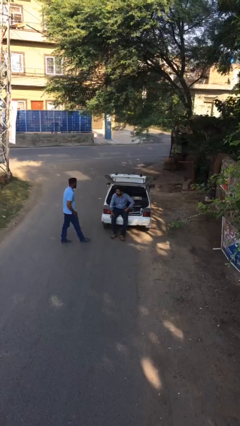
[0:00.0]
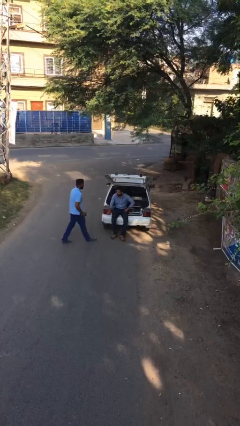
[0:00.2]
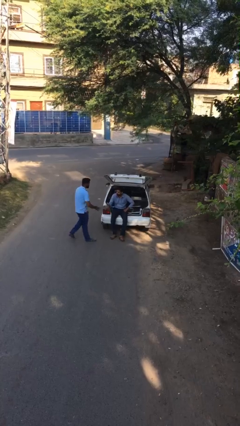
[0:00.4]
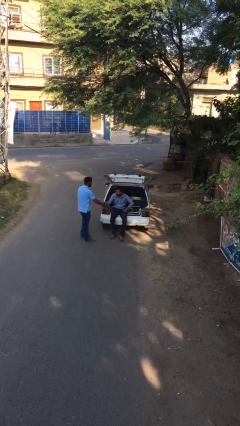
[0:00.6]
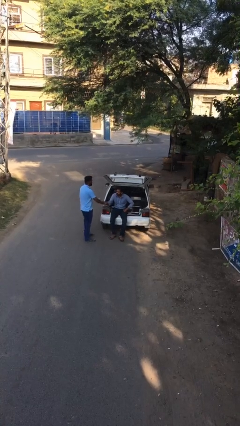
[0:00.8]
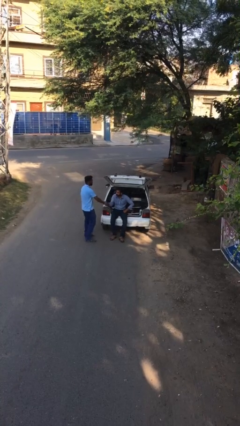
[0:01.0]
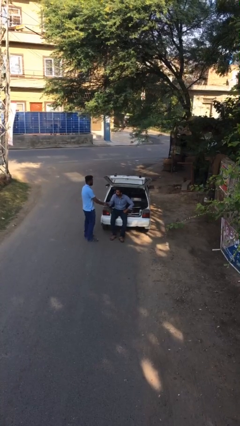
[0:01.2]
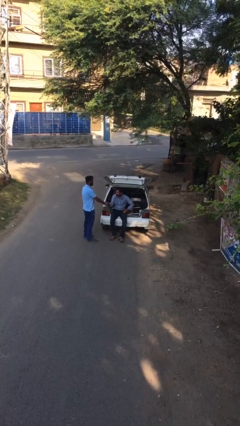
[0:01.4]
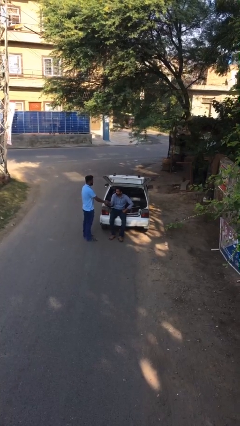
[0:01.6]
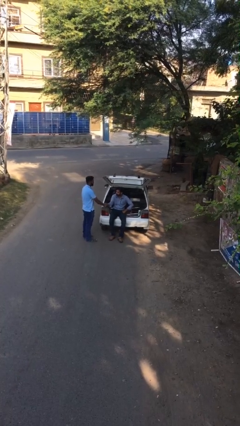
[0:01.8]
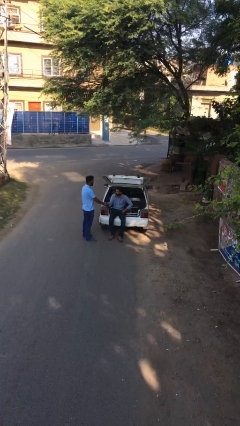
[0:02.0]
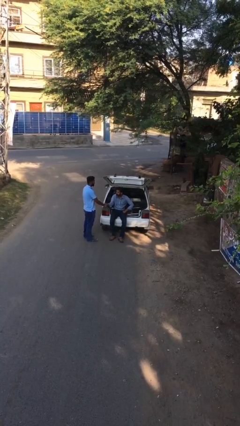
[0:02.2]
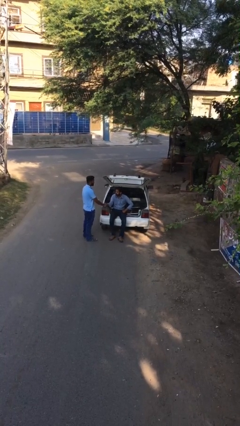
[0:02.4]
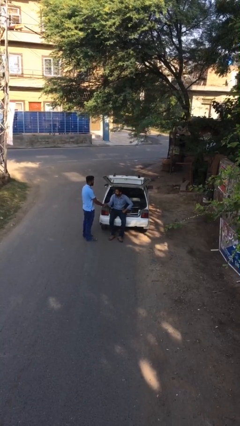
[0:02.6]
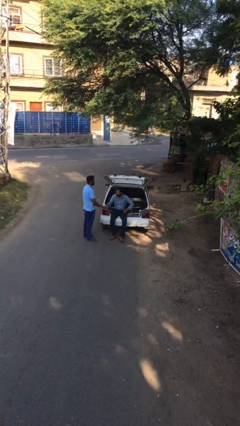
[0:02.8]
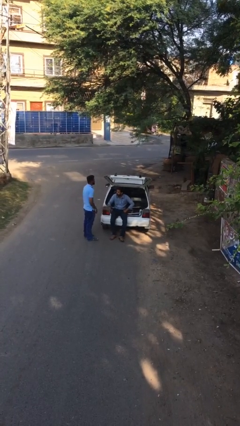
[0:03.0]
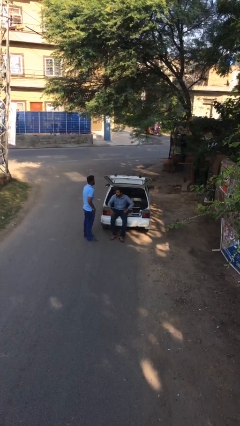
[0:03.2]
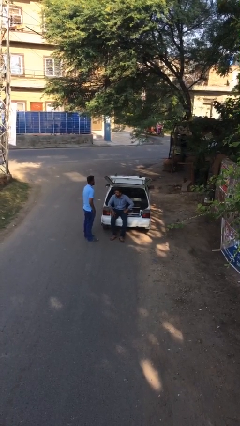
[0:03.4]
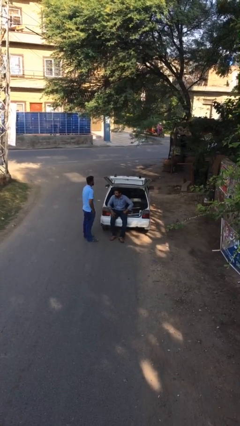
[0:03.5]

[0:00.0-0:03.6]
person shakes hand

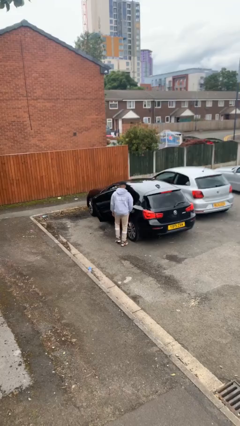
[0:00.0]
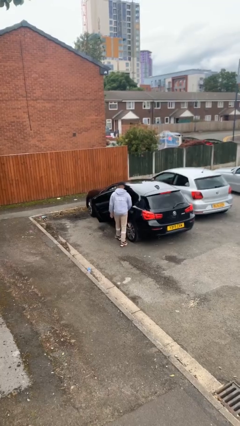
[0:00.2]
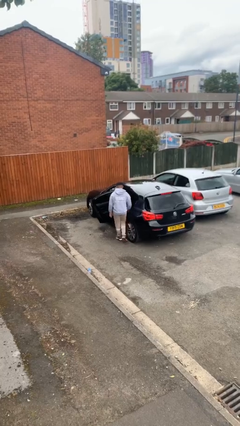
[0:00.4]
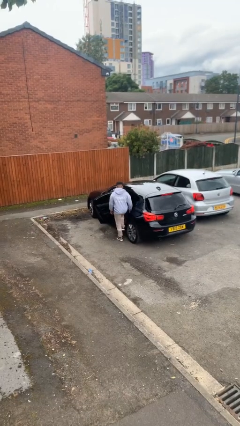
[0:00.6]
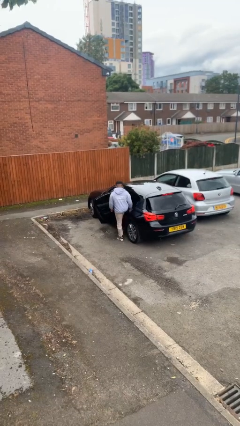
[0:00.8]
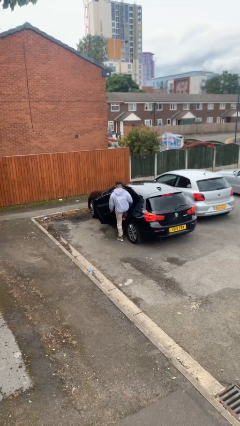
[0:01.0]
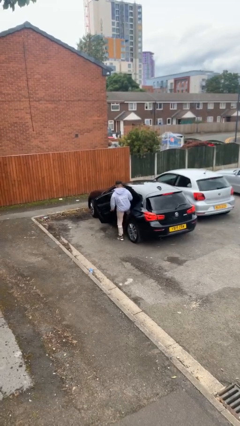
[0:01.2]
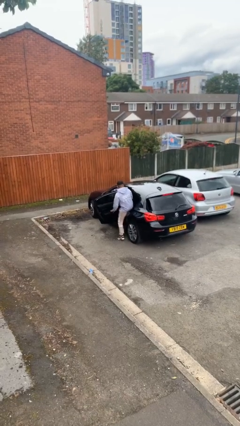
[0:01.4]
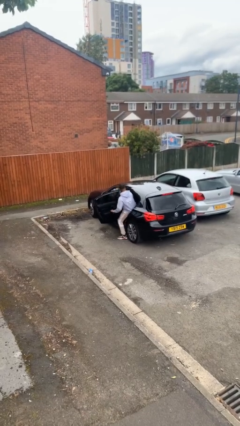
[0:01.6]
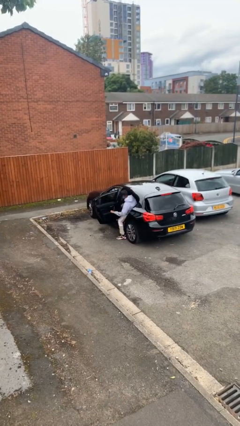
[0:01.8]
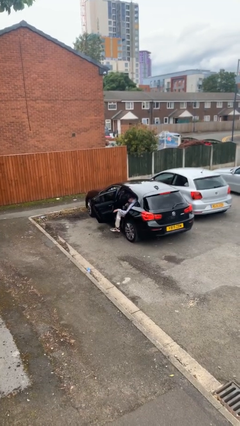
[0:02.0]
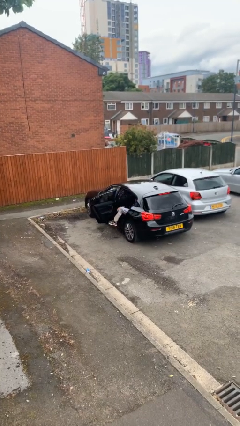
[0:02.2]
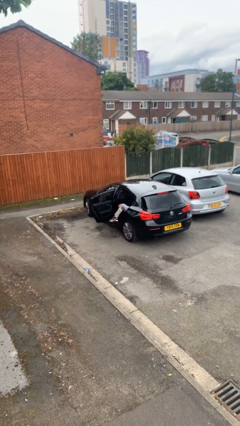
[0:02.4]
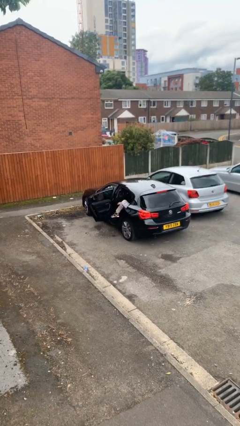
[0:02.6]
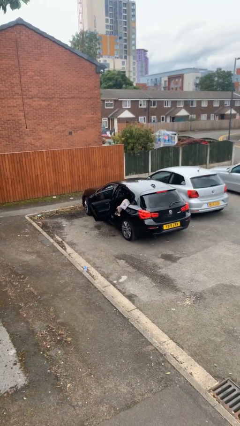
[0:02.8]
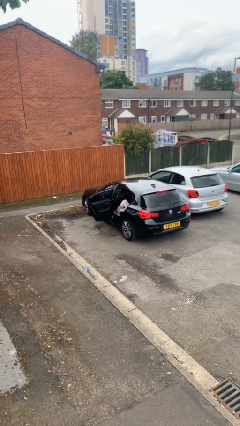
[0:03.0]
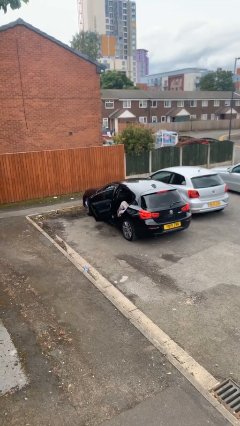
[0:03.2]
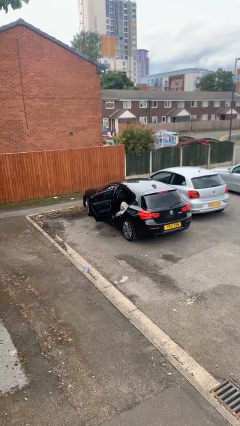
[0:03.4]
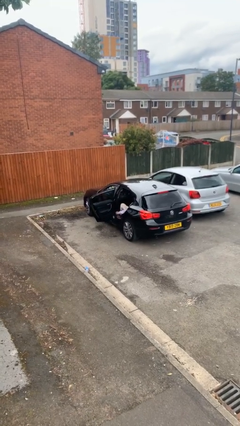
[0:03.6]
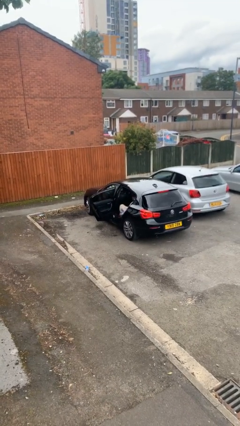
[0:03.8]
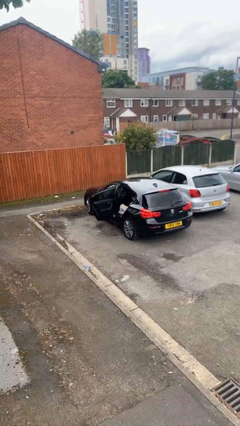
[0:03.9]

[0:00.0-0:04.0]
person enters car

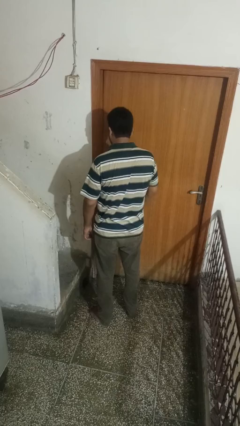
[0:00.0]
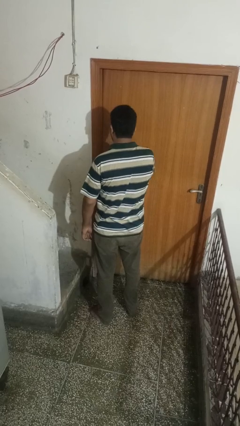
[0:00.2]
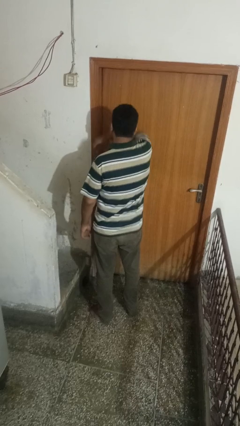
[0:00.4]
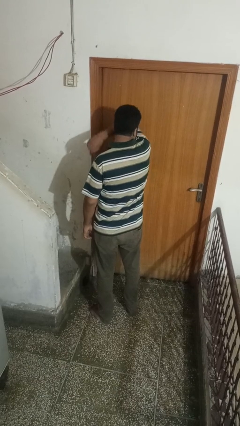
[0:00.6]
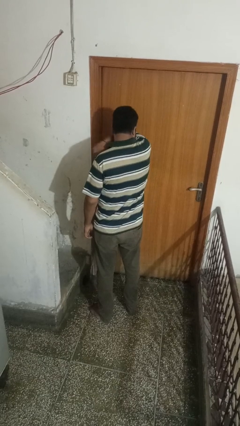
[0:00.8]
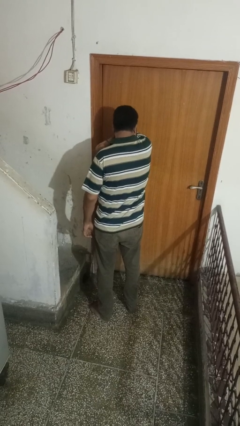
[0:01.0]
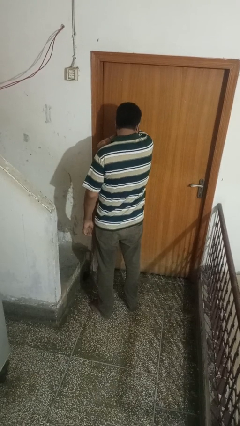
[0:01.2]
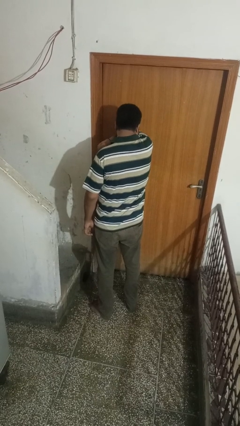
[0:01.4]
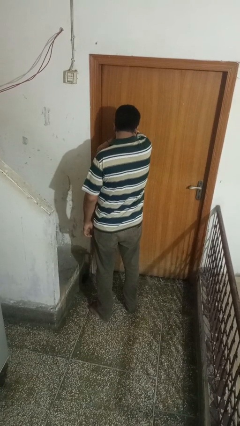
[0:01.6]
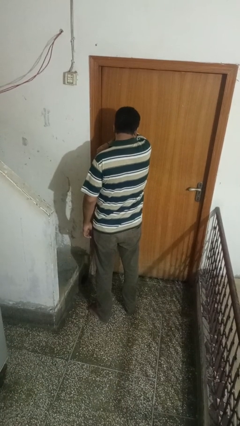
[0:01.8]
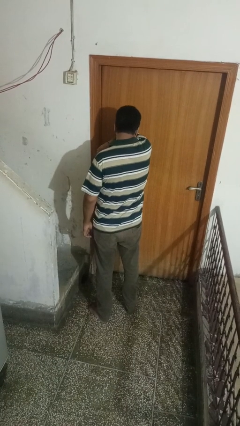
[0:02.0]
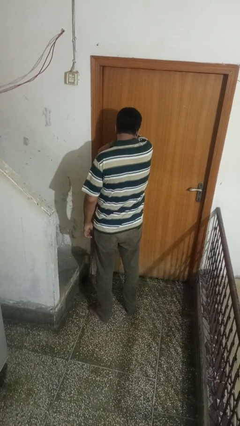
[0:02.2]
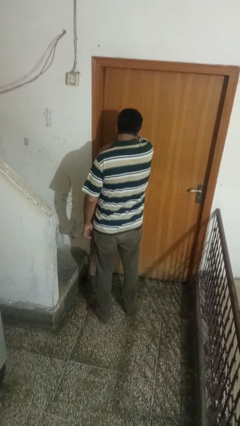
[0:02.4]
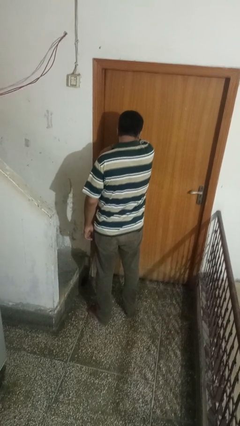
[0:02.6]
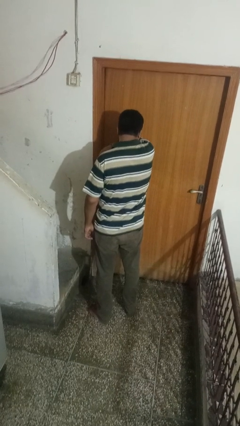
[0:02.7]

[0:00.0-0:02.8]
person sneezes into arm

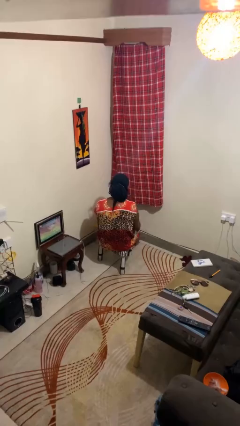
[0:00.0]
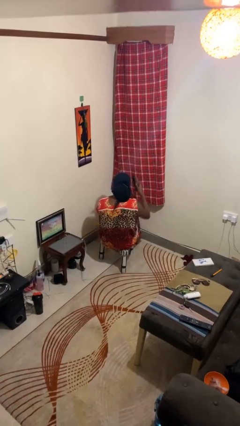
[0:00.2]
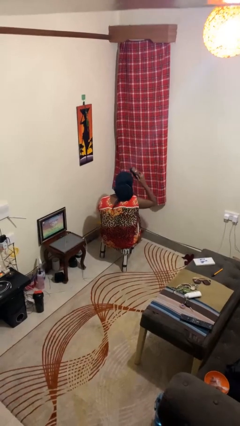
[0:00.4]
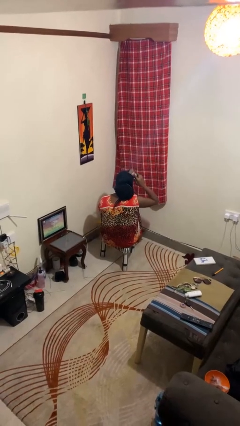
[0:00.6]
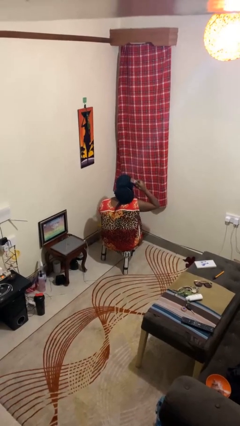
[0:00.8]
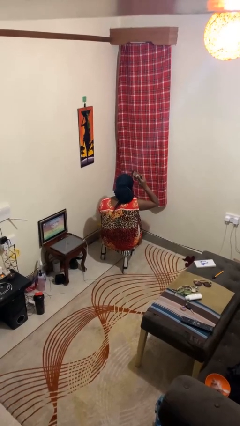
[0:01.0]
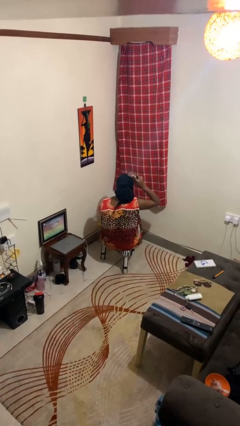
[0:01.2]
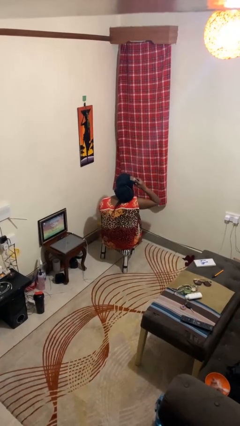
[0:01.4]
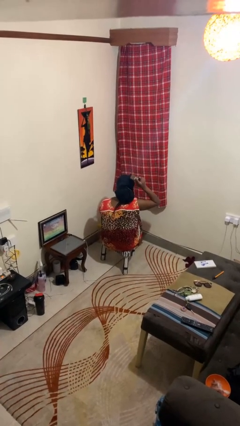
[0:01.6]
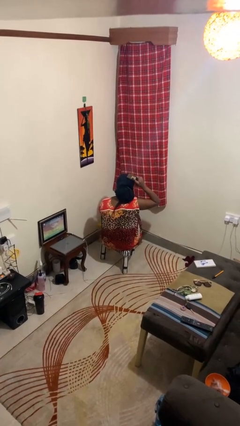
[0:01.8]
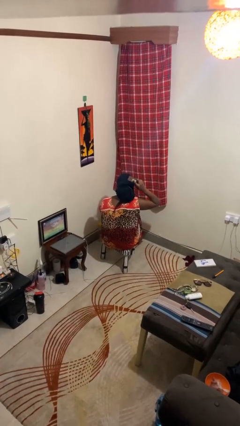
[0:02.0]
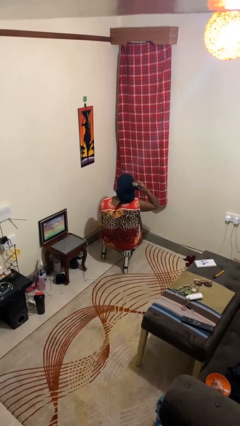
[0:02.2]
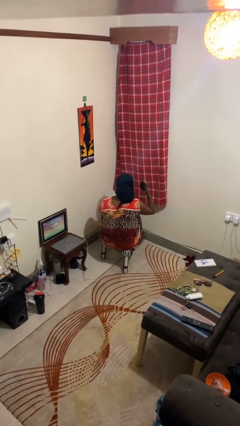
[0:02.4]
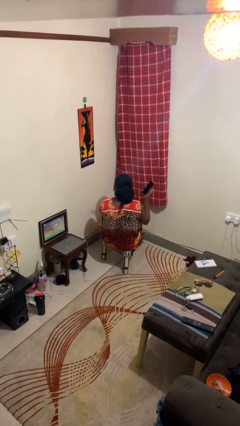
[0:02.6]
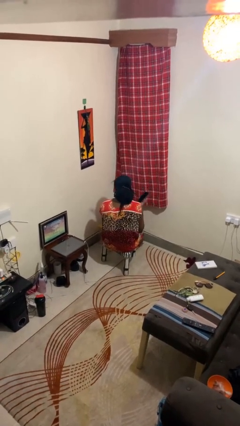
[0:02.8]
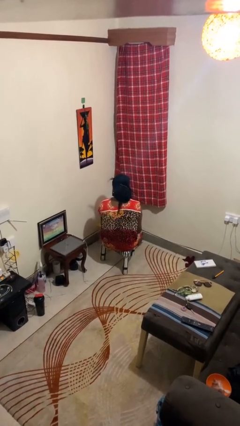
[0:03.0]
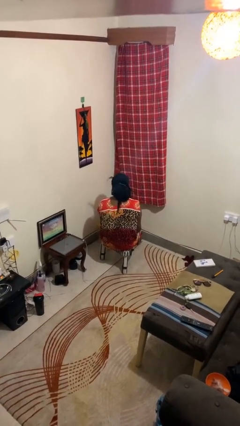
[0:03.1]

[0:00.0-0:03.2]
person brushes hair

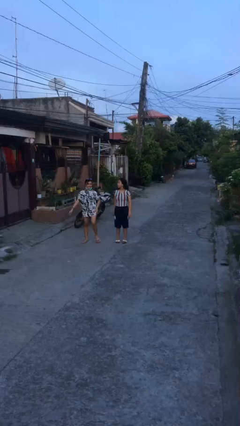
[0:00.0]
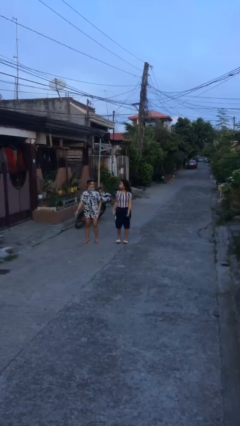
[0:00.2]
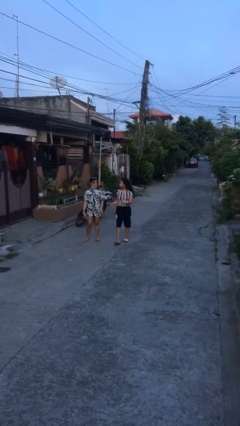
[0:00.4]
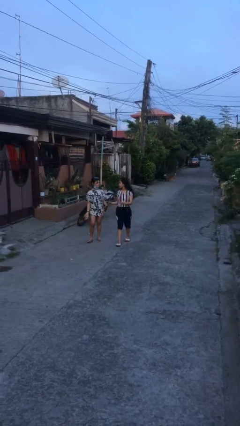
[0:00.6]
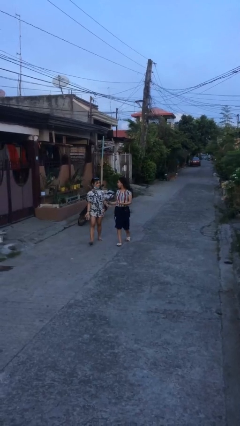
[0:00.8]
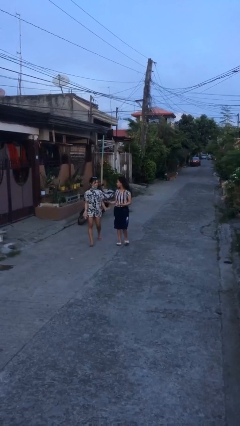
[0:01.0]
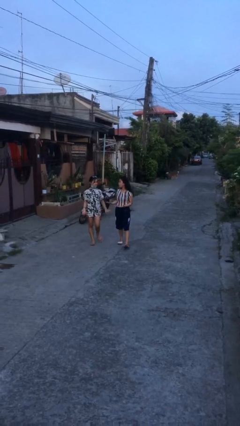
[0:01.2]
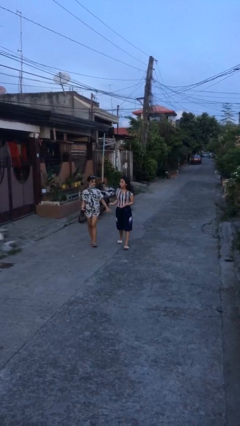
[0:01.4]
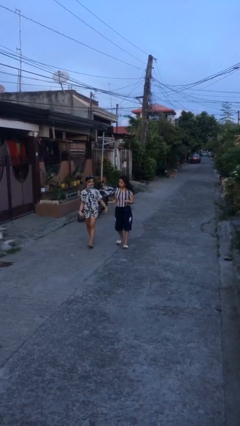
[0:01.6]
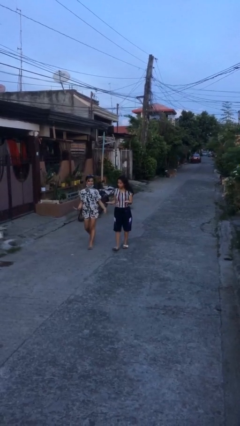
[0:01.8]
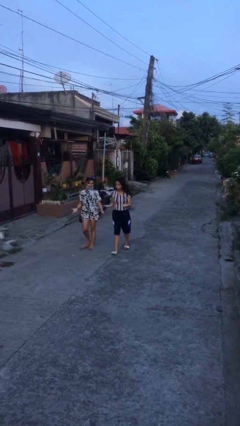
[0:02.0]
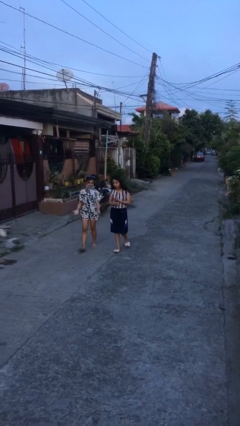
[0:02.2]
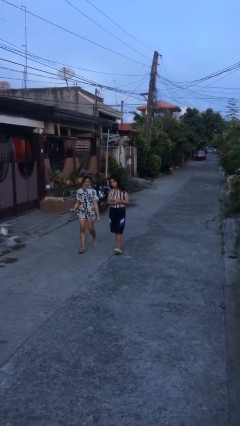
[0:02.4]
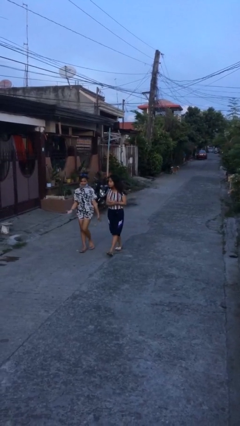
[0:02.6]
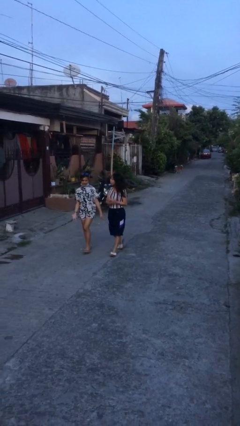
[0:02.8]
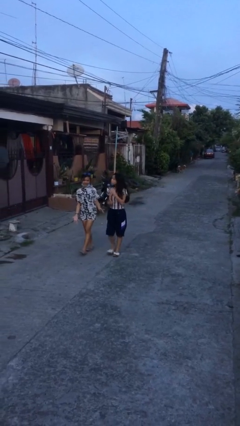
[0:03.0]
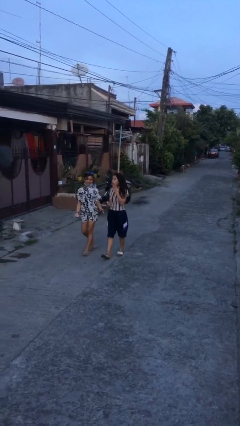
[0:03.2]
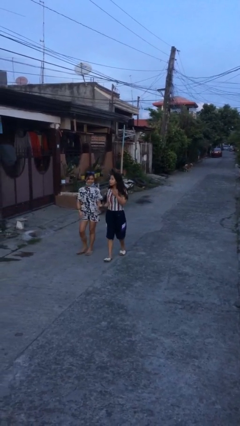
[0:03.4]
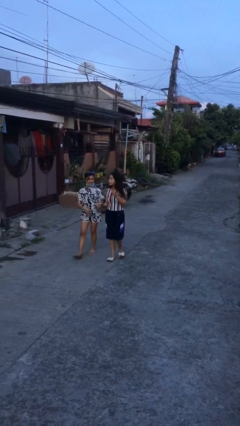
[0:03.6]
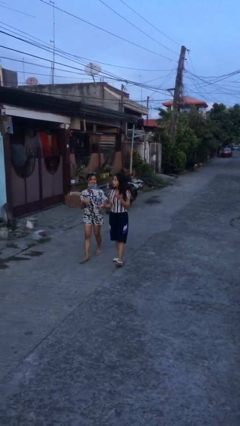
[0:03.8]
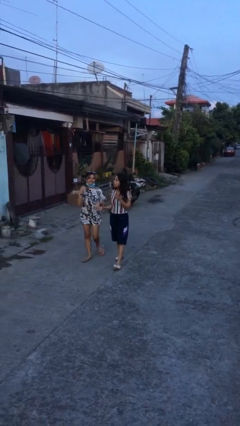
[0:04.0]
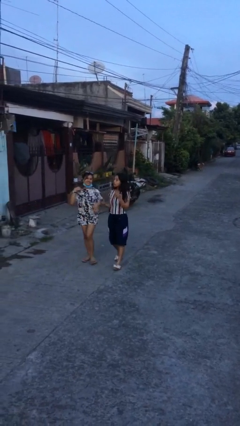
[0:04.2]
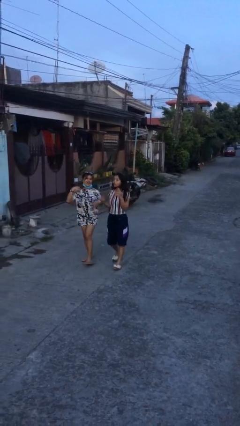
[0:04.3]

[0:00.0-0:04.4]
person talks to person
